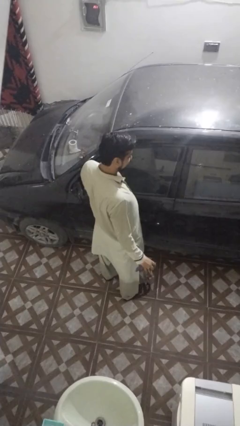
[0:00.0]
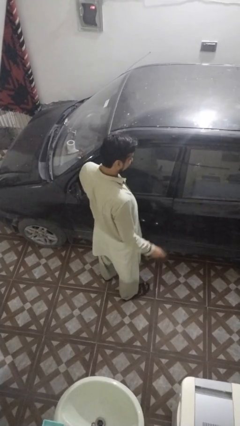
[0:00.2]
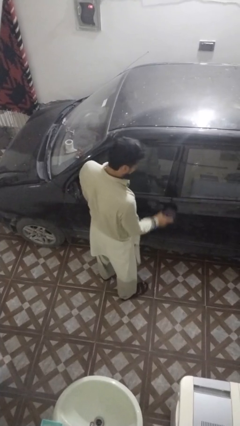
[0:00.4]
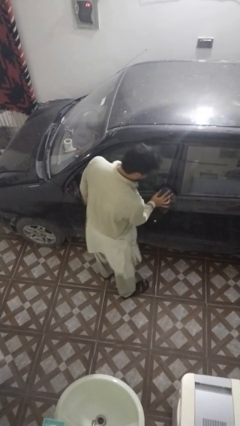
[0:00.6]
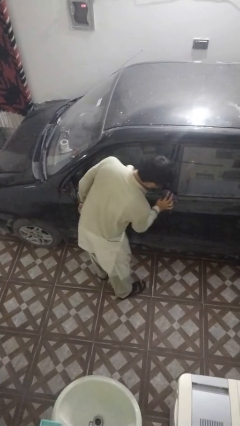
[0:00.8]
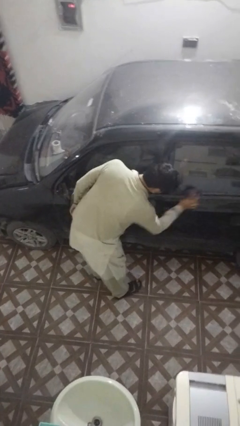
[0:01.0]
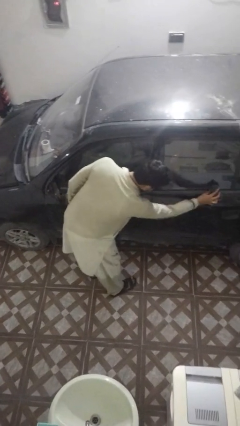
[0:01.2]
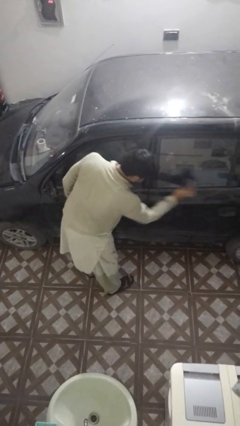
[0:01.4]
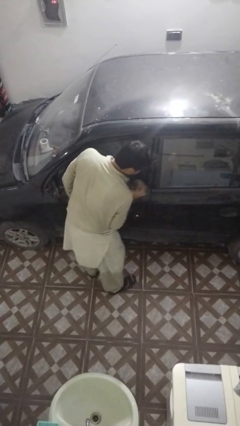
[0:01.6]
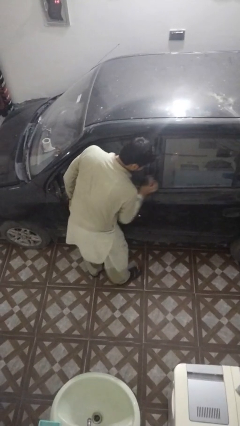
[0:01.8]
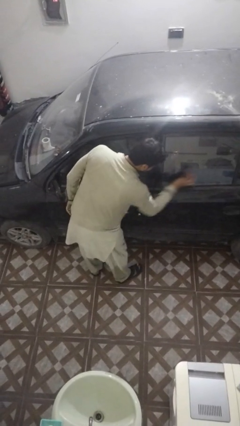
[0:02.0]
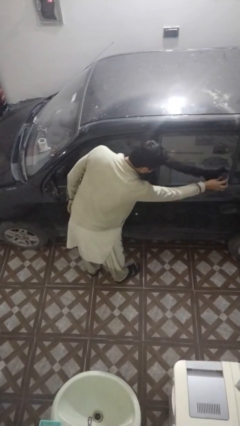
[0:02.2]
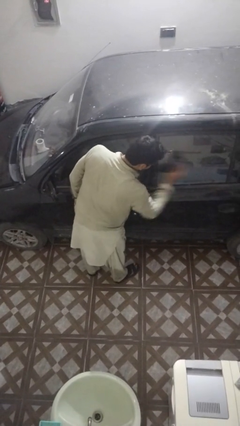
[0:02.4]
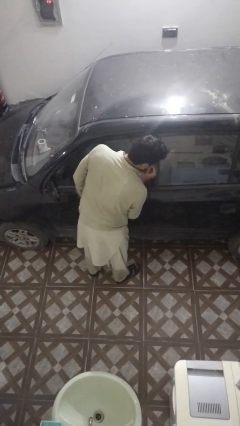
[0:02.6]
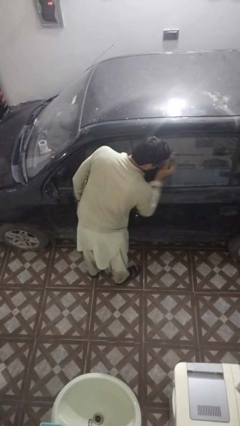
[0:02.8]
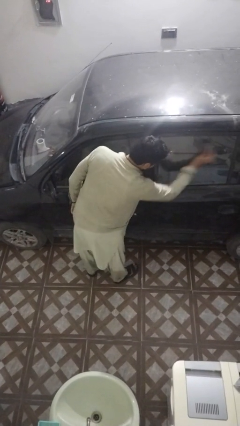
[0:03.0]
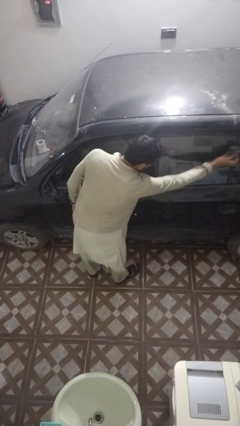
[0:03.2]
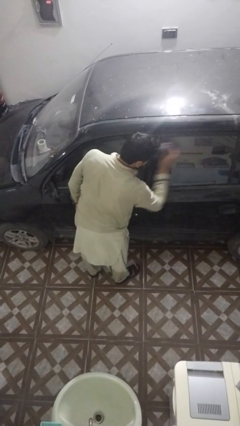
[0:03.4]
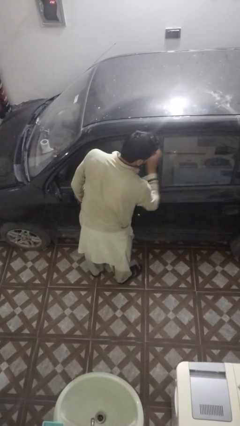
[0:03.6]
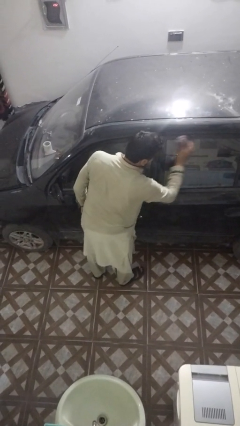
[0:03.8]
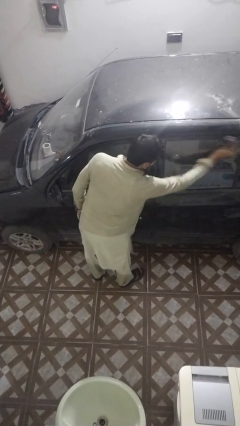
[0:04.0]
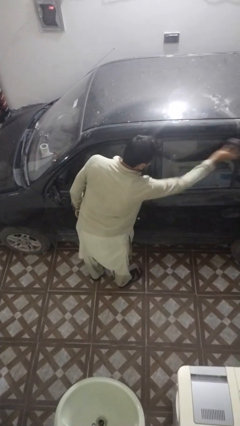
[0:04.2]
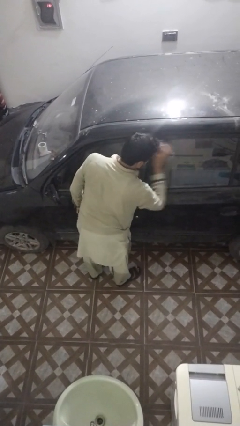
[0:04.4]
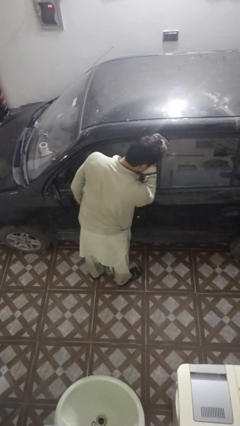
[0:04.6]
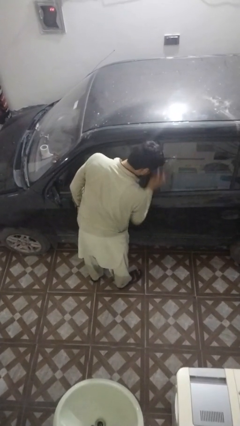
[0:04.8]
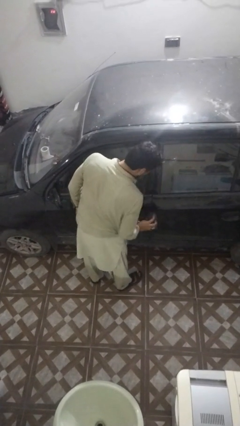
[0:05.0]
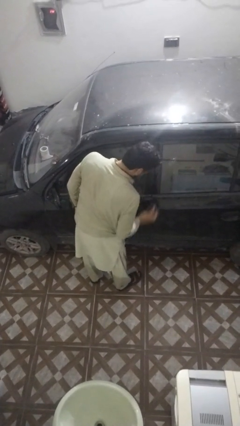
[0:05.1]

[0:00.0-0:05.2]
person polishes car with rag

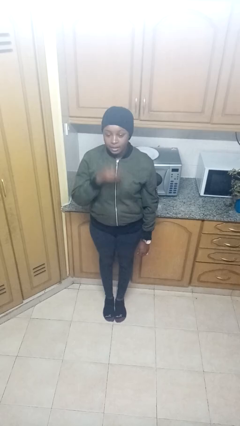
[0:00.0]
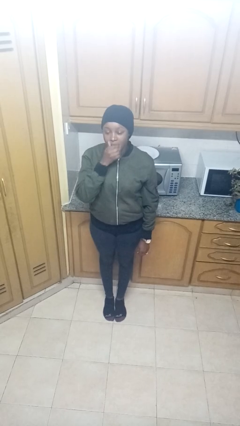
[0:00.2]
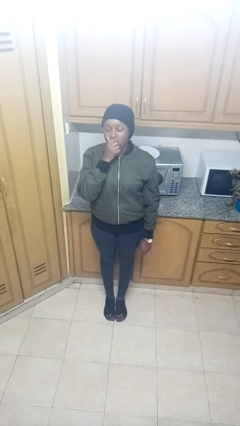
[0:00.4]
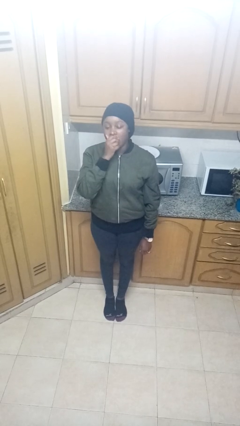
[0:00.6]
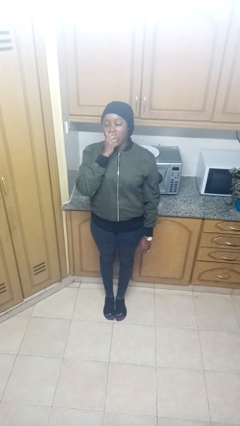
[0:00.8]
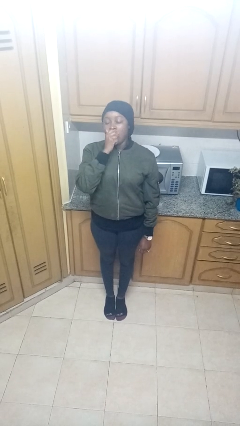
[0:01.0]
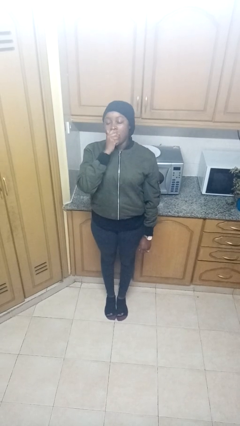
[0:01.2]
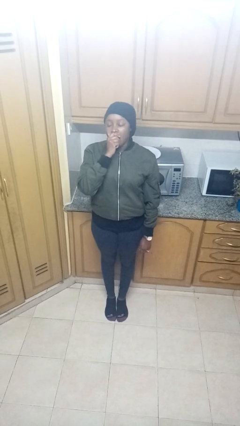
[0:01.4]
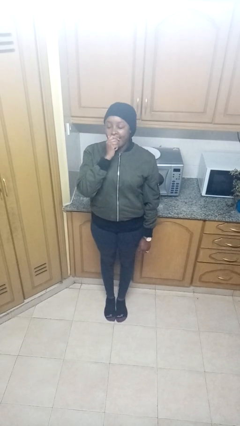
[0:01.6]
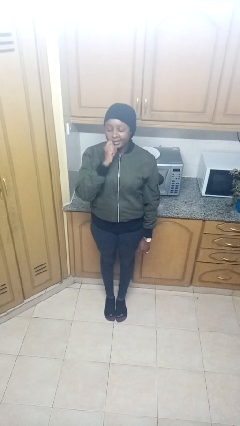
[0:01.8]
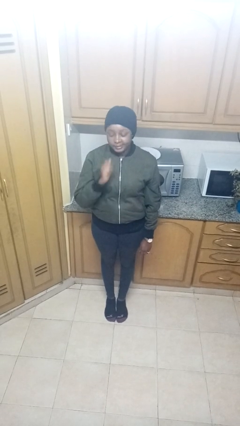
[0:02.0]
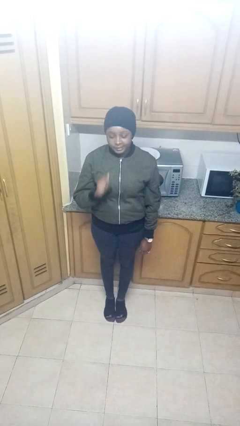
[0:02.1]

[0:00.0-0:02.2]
person yawns

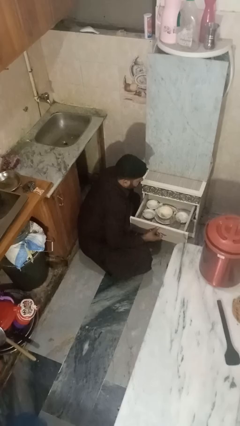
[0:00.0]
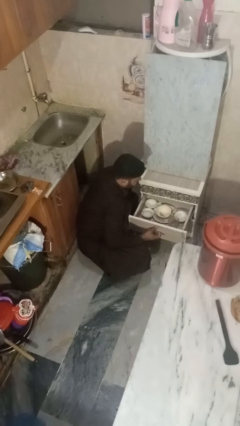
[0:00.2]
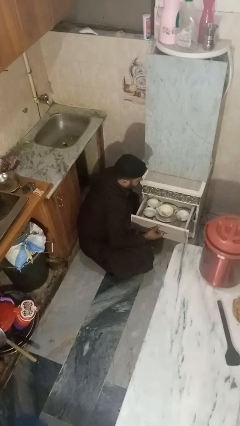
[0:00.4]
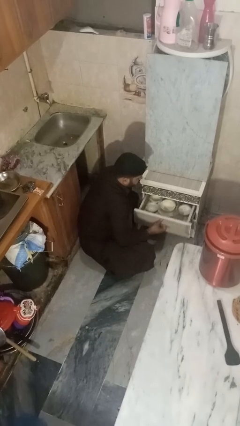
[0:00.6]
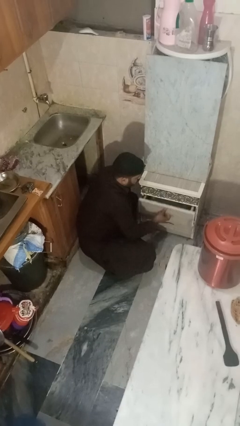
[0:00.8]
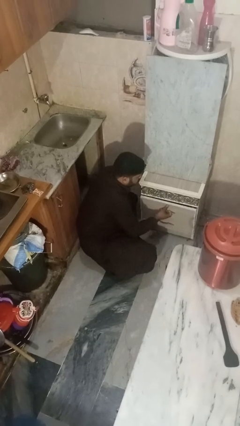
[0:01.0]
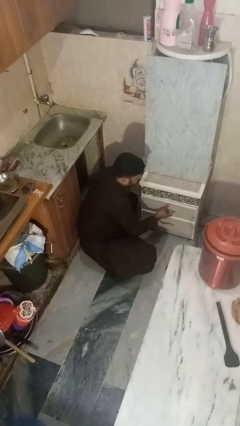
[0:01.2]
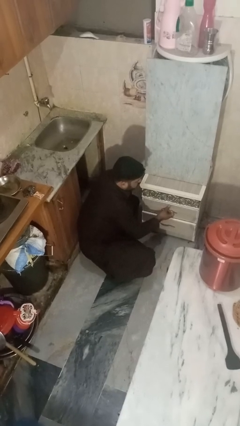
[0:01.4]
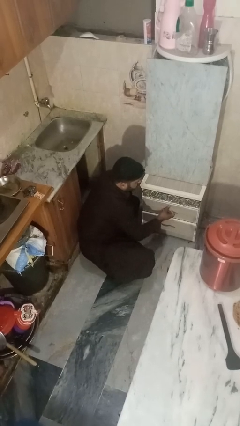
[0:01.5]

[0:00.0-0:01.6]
person closes kitchen drawer

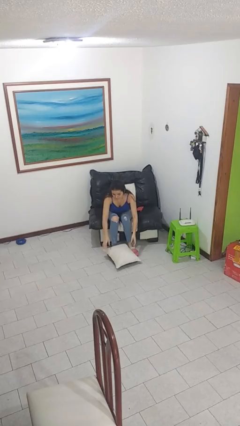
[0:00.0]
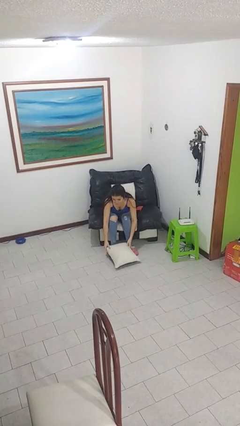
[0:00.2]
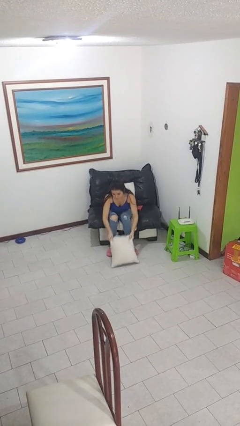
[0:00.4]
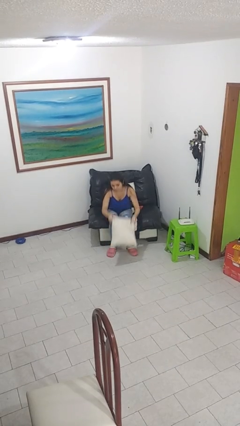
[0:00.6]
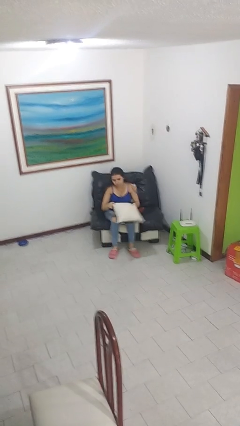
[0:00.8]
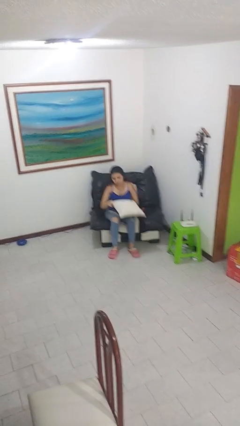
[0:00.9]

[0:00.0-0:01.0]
person picks up object from floor

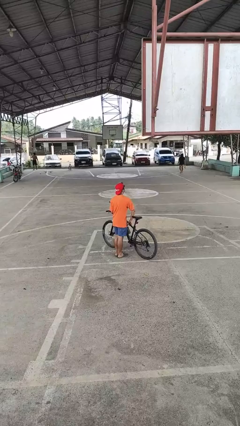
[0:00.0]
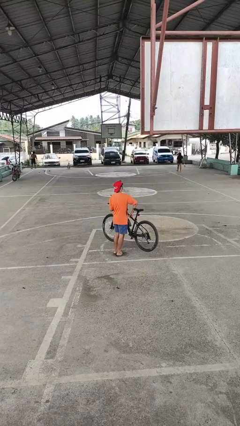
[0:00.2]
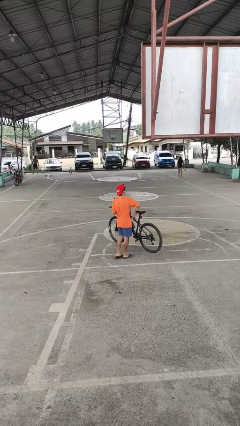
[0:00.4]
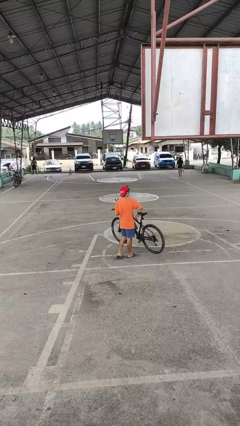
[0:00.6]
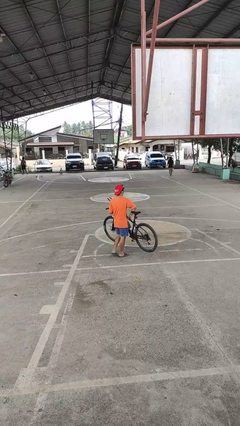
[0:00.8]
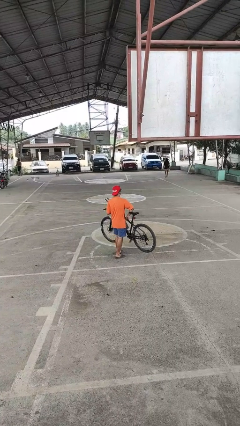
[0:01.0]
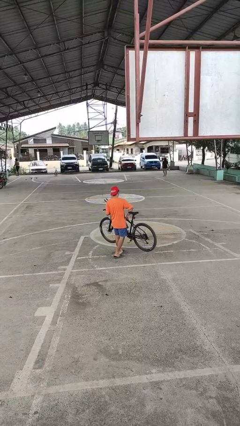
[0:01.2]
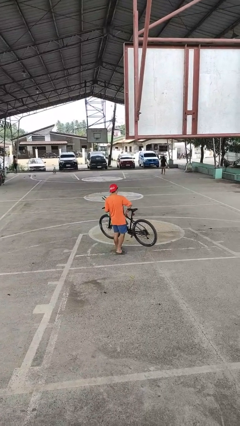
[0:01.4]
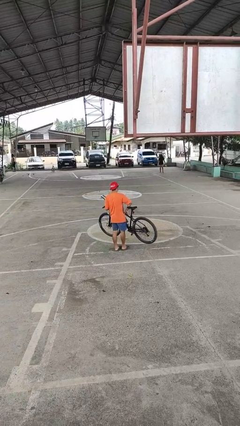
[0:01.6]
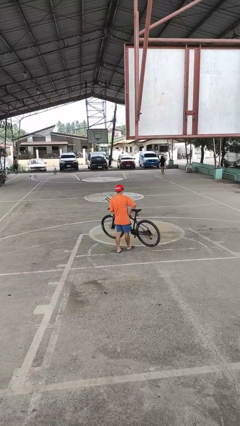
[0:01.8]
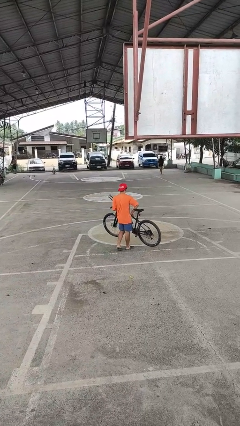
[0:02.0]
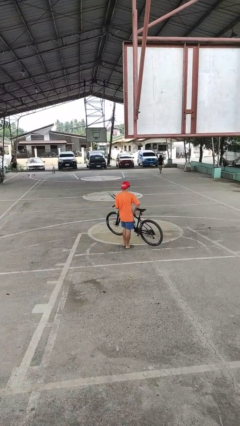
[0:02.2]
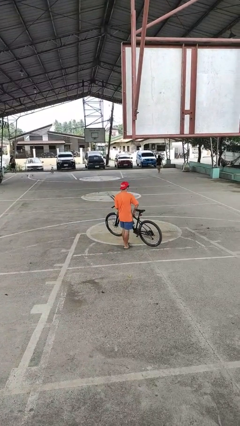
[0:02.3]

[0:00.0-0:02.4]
person carries bicycle

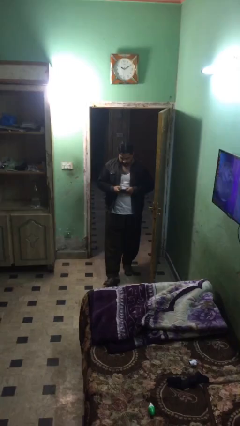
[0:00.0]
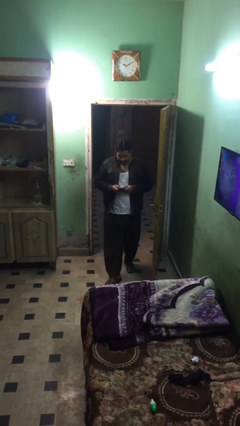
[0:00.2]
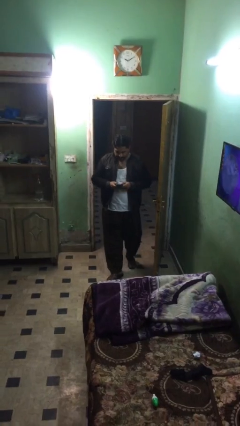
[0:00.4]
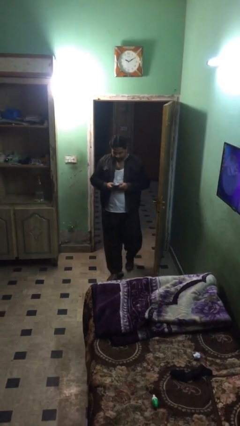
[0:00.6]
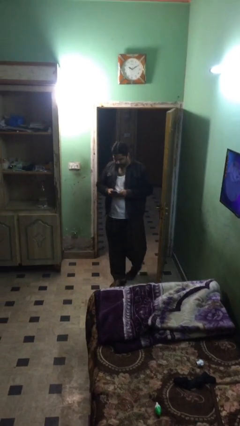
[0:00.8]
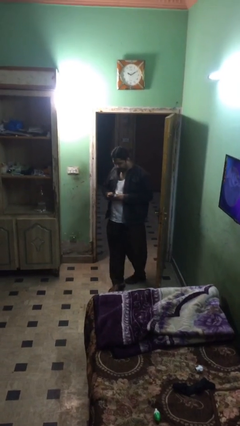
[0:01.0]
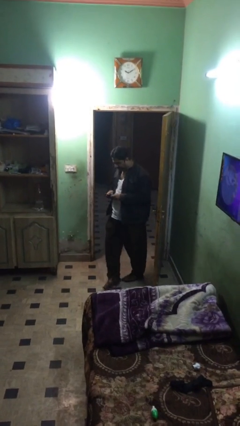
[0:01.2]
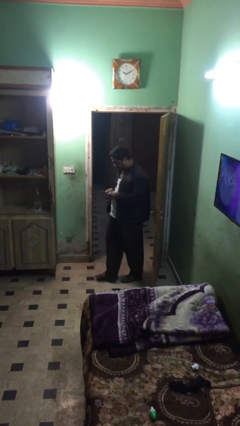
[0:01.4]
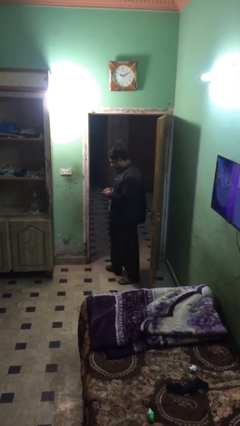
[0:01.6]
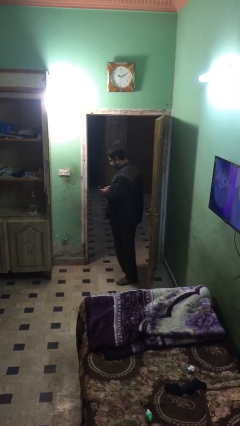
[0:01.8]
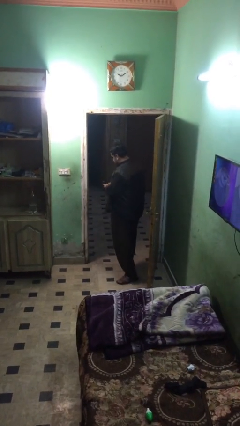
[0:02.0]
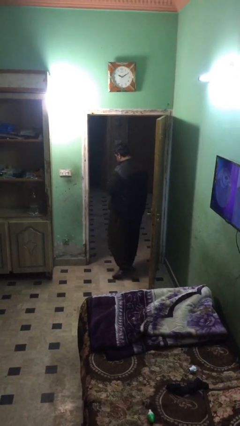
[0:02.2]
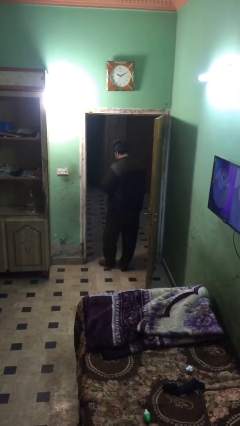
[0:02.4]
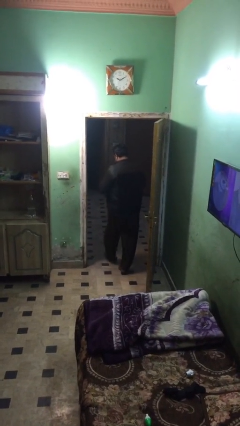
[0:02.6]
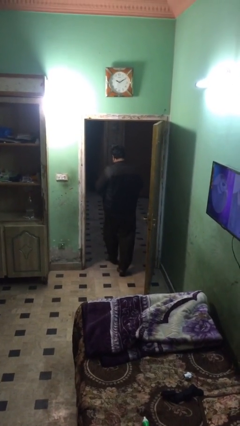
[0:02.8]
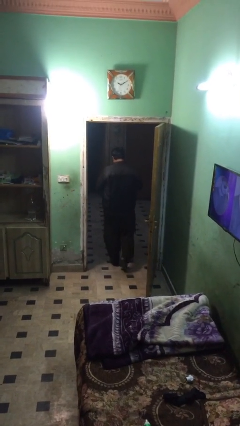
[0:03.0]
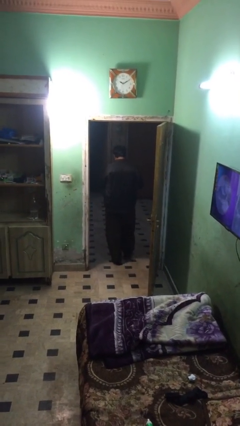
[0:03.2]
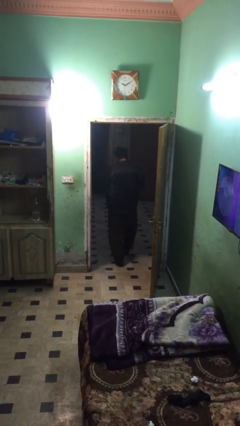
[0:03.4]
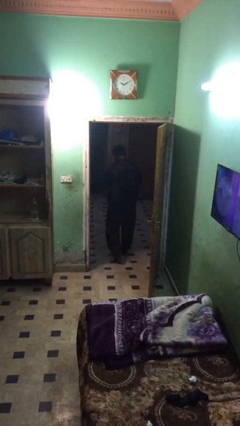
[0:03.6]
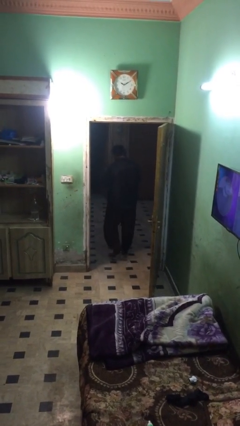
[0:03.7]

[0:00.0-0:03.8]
person exits scene through structure

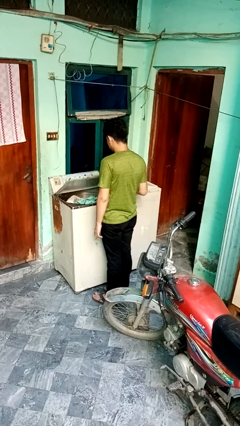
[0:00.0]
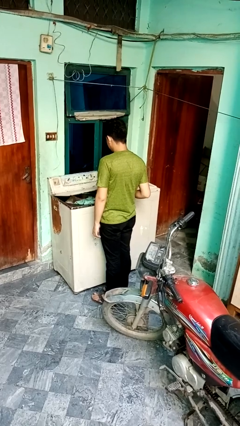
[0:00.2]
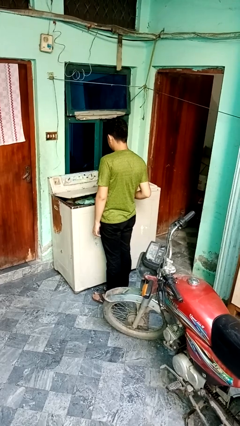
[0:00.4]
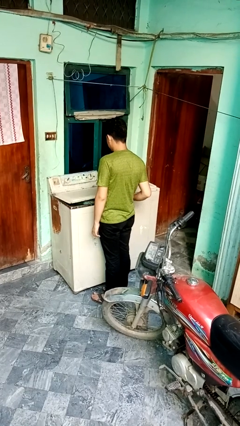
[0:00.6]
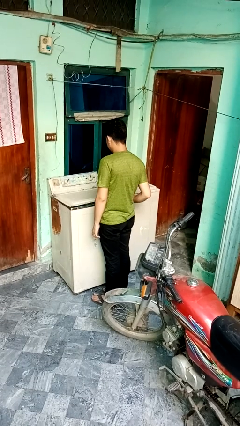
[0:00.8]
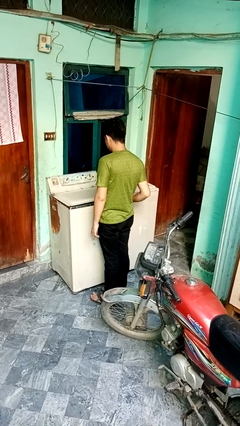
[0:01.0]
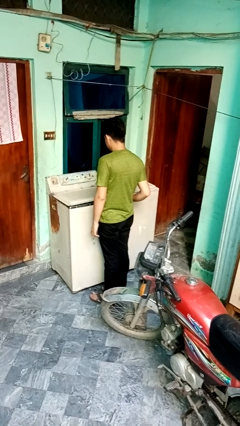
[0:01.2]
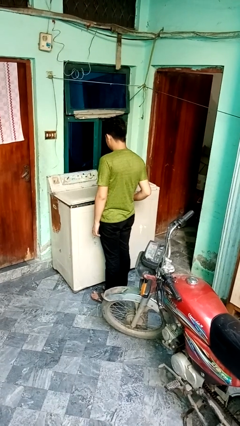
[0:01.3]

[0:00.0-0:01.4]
person closes clothes washer
